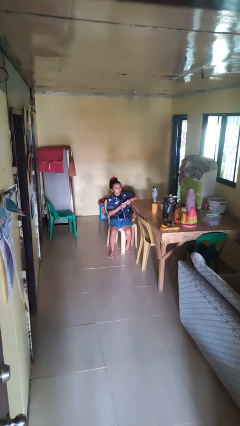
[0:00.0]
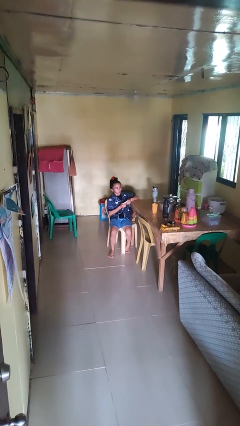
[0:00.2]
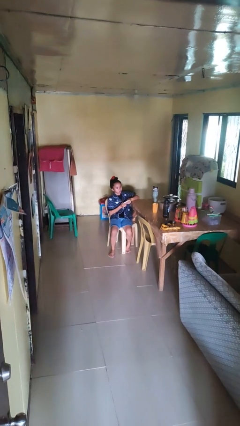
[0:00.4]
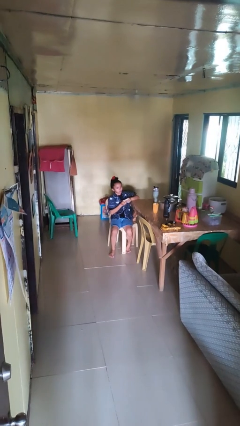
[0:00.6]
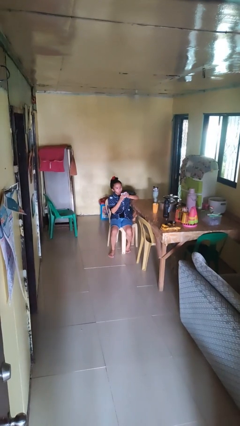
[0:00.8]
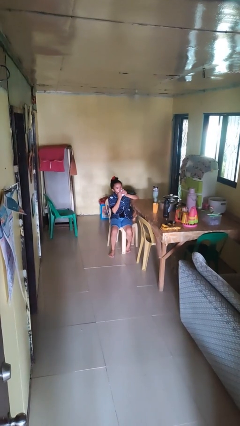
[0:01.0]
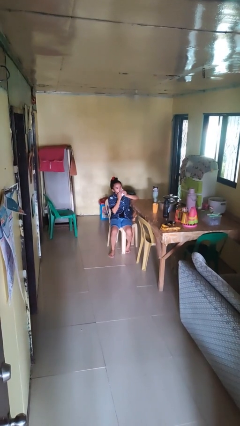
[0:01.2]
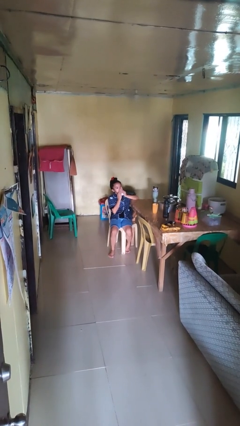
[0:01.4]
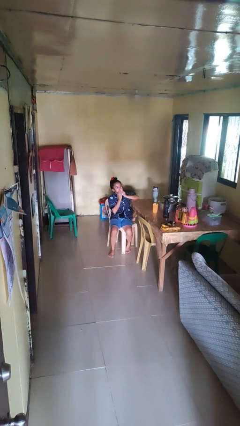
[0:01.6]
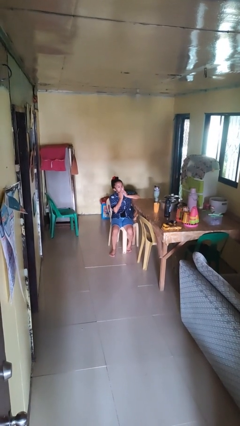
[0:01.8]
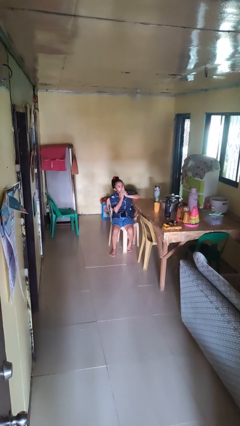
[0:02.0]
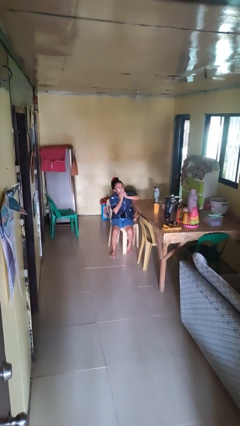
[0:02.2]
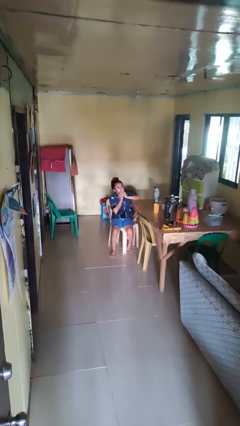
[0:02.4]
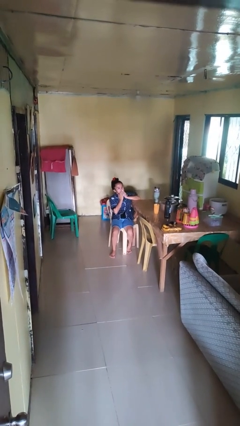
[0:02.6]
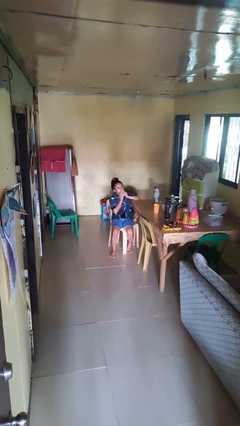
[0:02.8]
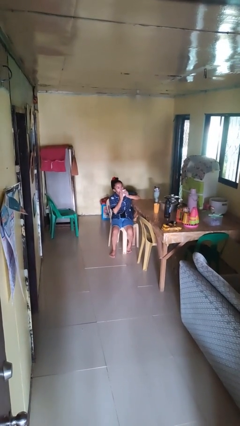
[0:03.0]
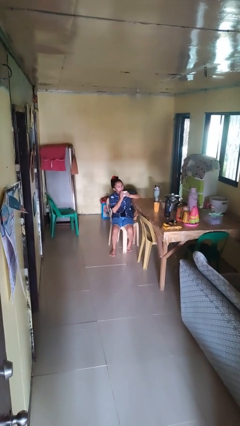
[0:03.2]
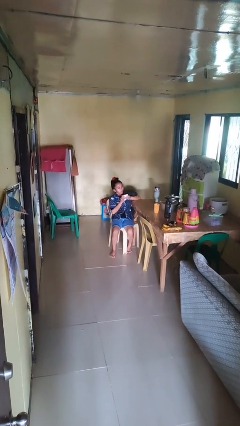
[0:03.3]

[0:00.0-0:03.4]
person wipes mouth with napkin

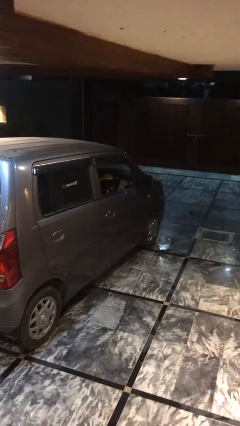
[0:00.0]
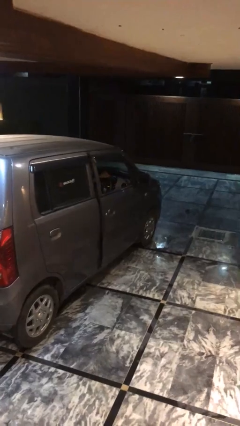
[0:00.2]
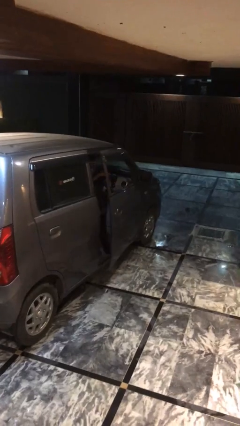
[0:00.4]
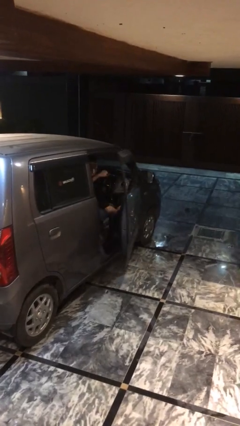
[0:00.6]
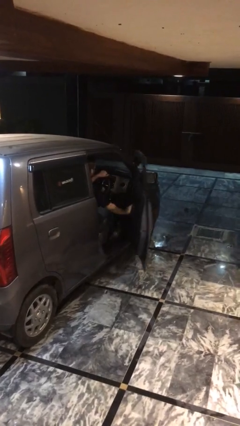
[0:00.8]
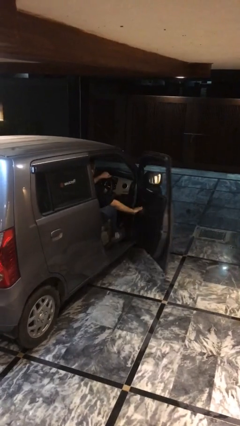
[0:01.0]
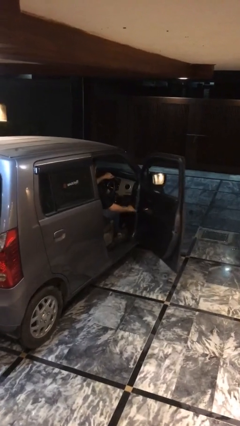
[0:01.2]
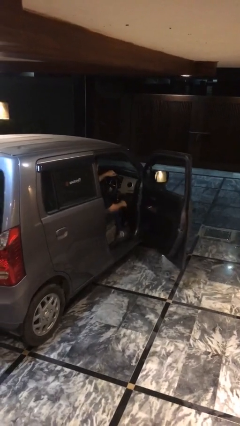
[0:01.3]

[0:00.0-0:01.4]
person opens car door

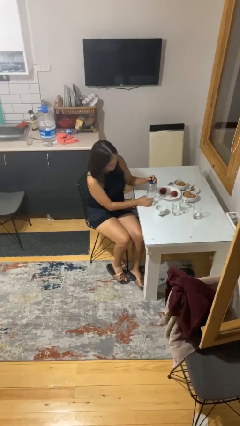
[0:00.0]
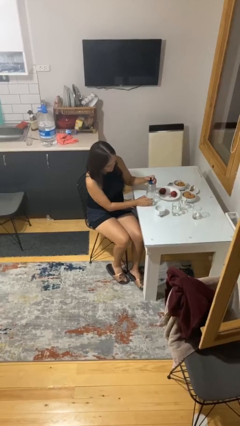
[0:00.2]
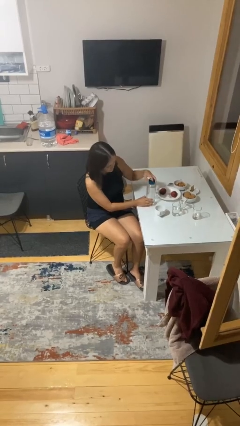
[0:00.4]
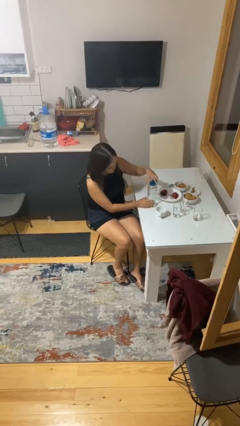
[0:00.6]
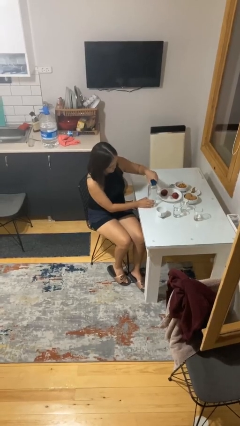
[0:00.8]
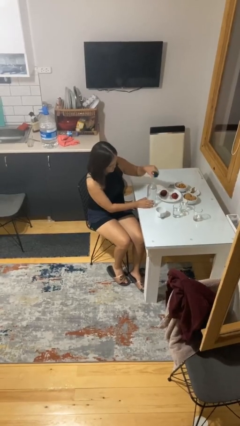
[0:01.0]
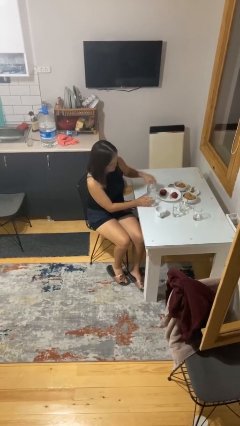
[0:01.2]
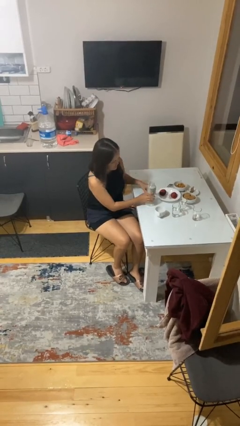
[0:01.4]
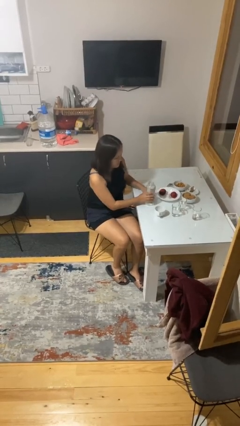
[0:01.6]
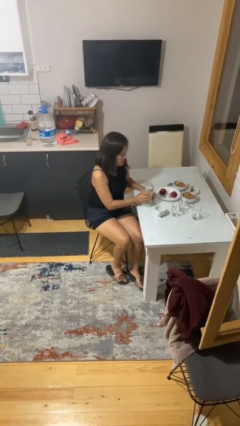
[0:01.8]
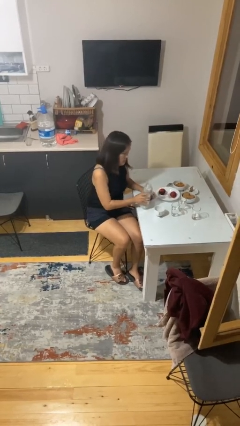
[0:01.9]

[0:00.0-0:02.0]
person unscrews lid from bottle

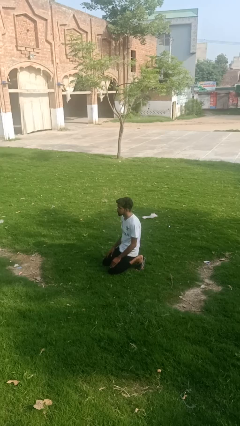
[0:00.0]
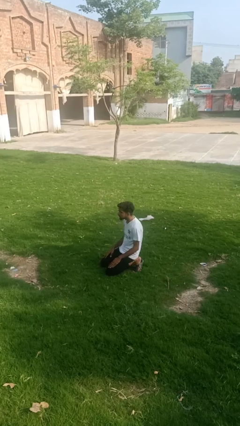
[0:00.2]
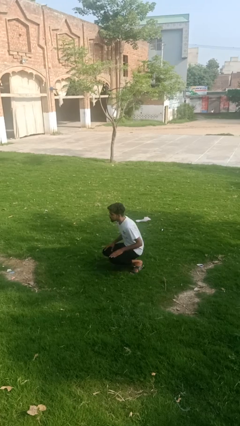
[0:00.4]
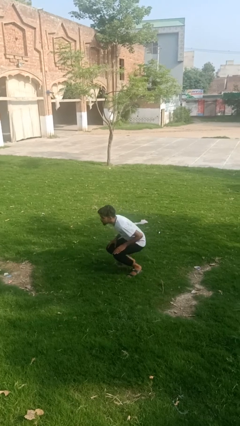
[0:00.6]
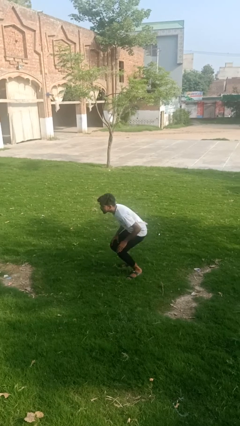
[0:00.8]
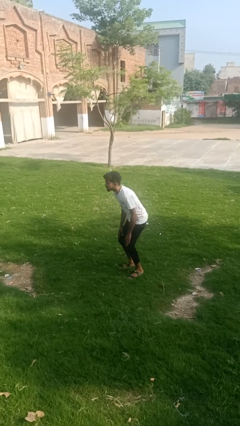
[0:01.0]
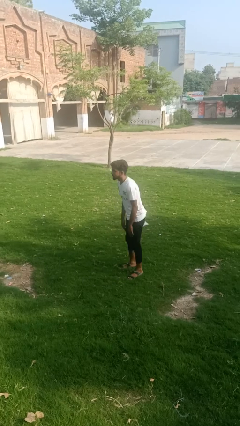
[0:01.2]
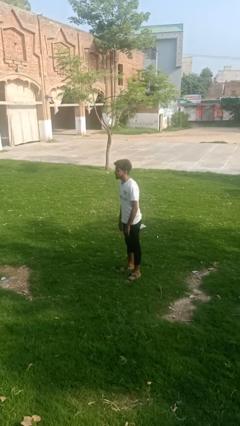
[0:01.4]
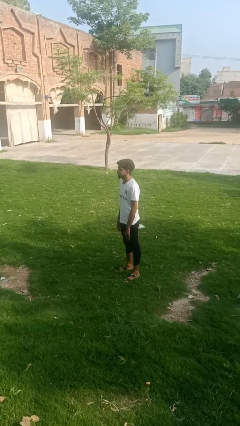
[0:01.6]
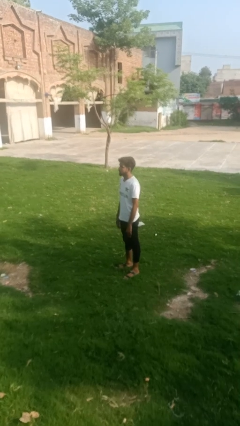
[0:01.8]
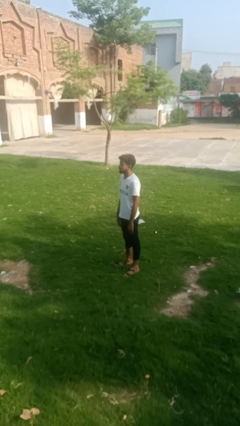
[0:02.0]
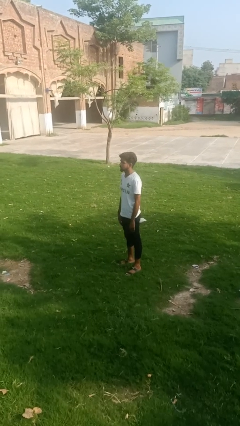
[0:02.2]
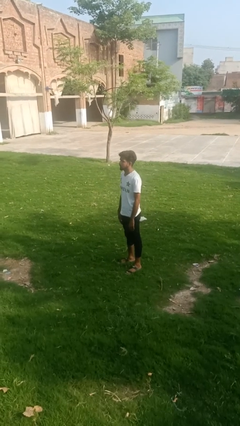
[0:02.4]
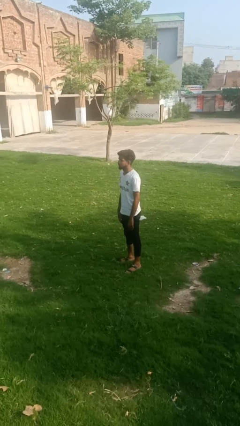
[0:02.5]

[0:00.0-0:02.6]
person stands up from floor

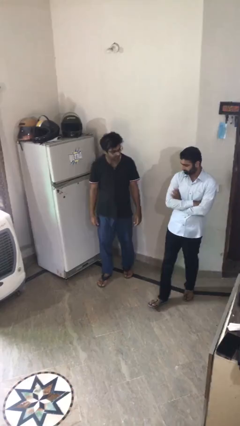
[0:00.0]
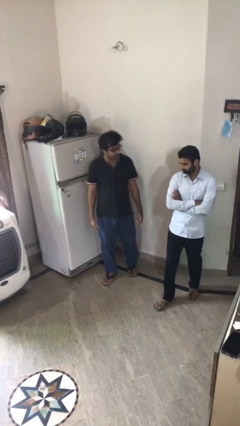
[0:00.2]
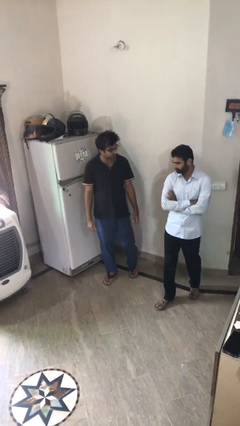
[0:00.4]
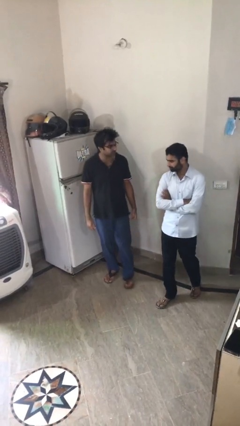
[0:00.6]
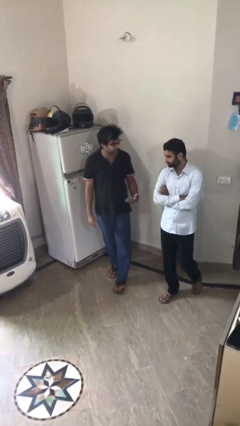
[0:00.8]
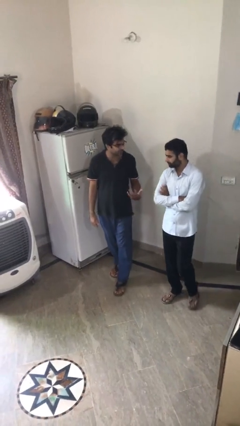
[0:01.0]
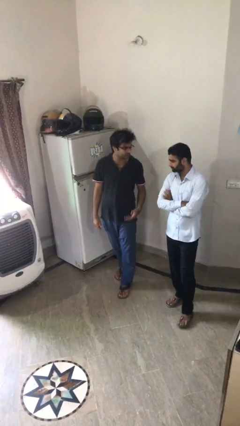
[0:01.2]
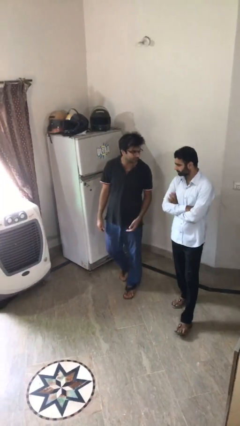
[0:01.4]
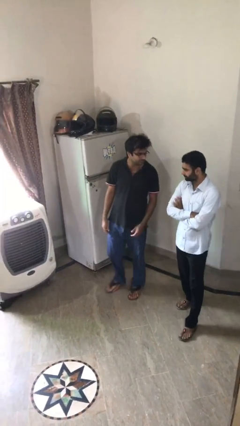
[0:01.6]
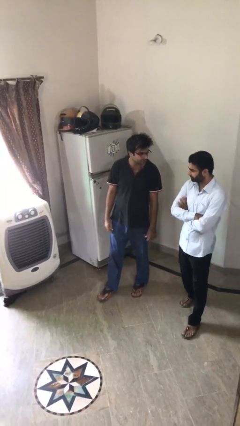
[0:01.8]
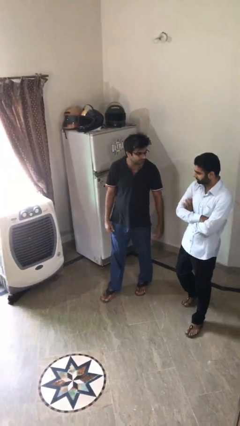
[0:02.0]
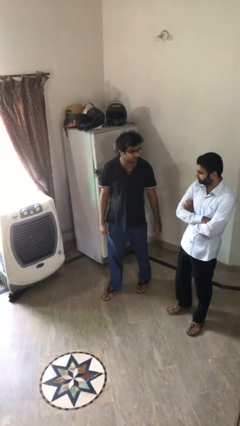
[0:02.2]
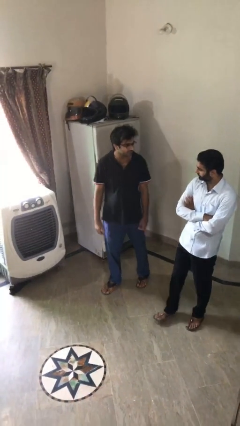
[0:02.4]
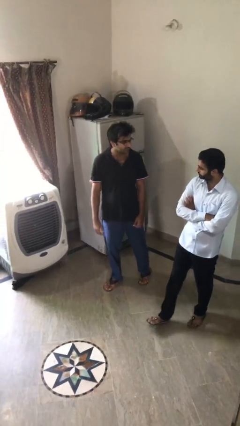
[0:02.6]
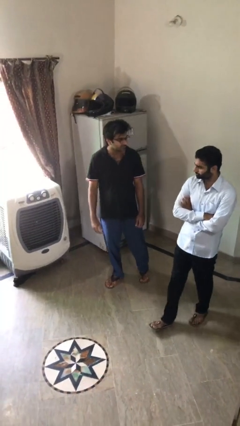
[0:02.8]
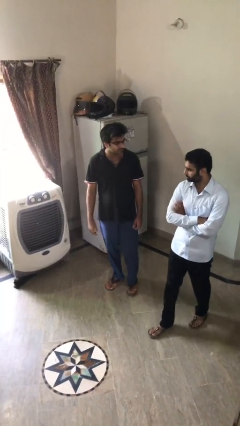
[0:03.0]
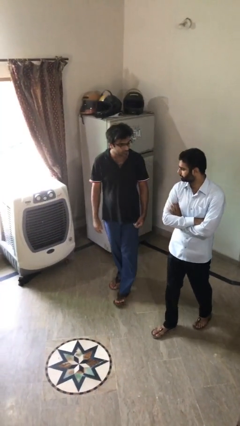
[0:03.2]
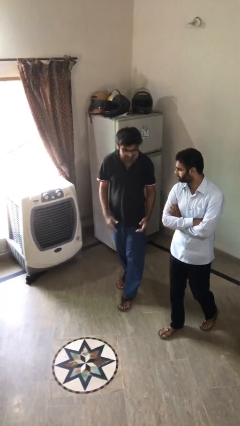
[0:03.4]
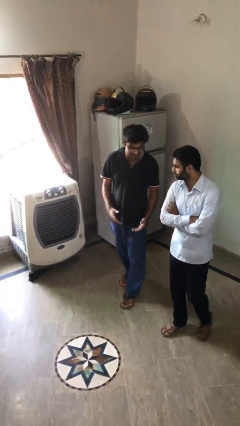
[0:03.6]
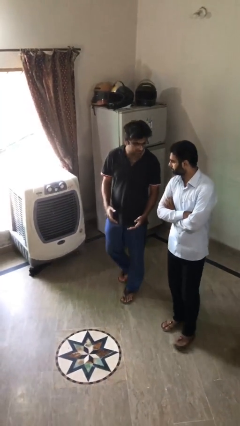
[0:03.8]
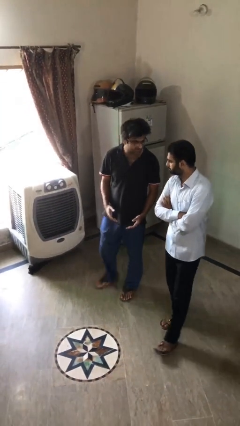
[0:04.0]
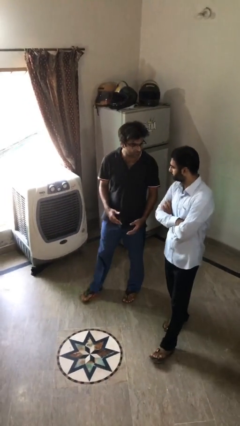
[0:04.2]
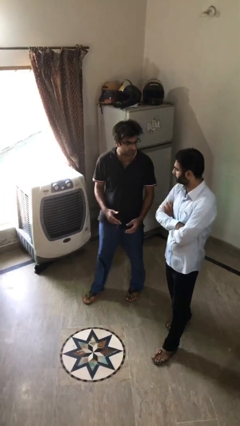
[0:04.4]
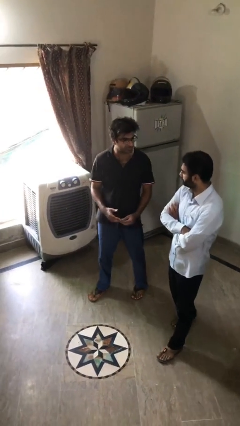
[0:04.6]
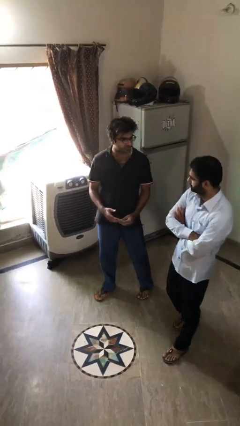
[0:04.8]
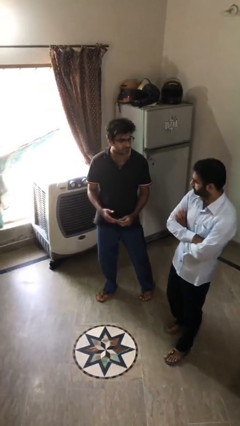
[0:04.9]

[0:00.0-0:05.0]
person talks to person

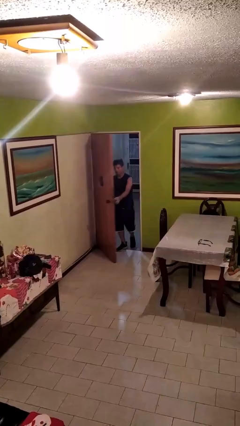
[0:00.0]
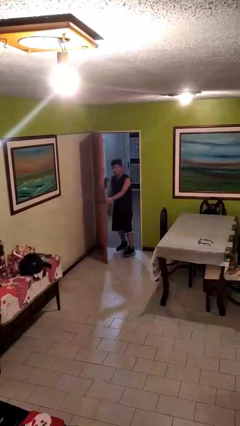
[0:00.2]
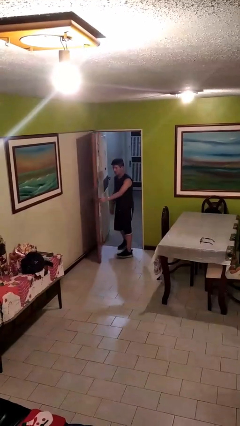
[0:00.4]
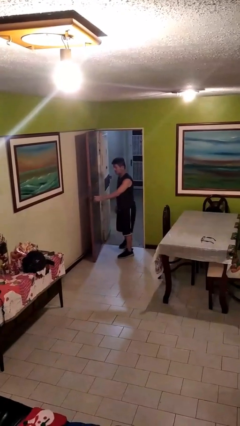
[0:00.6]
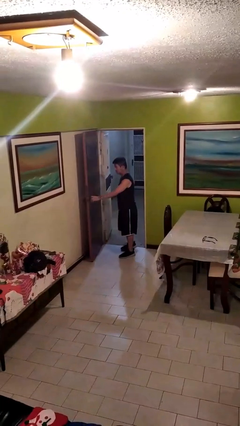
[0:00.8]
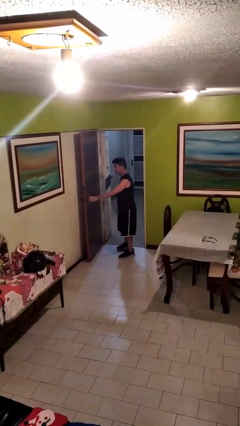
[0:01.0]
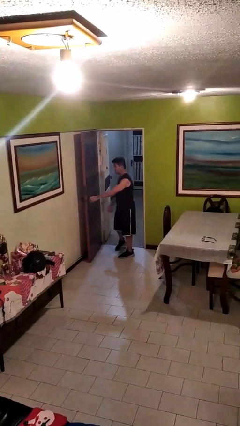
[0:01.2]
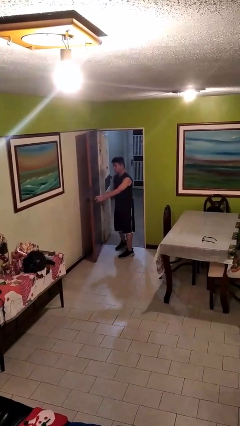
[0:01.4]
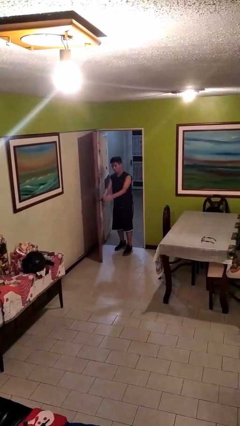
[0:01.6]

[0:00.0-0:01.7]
person opens facility door

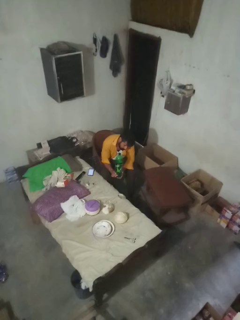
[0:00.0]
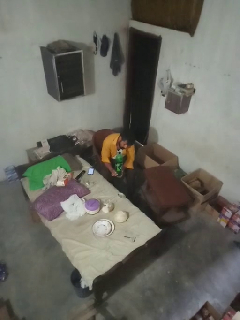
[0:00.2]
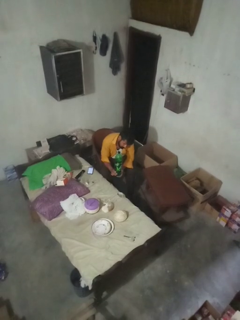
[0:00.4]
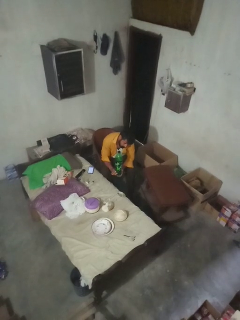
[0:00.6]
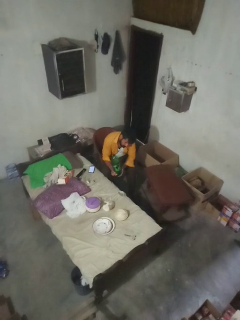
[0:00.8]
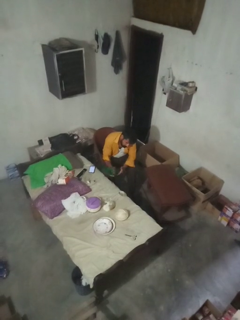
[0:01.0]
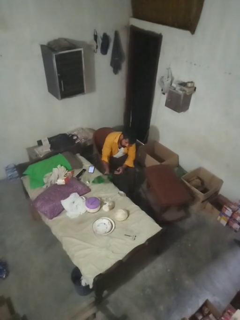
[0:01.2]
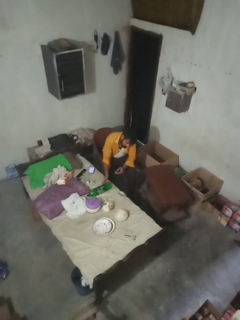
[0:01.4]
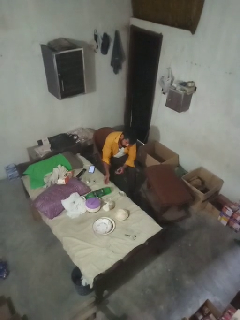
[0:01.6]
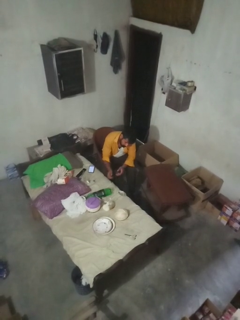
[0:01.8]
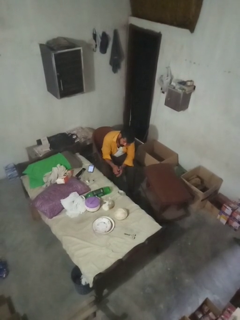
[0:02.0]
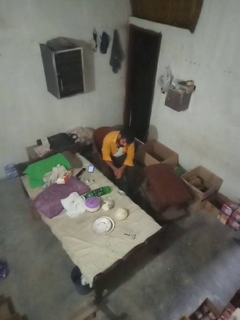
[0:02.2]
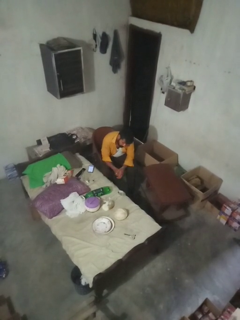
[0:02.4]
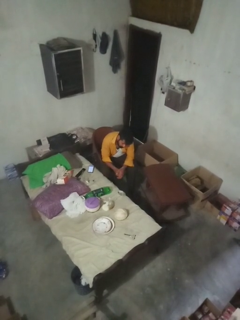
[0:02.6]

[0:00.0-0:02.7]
person puts down object on bed
